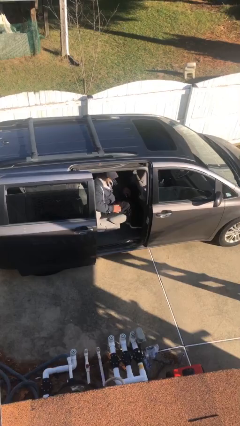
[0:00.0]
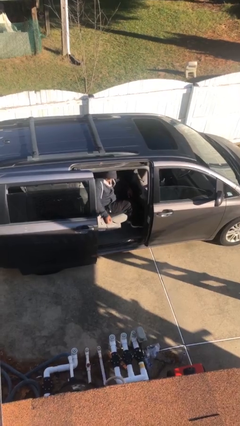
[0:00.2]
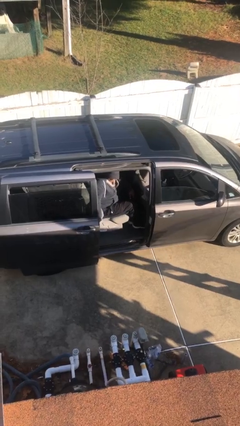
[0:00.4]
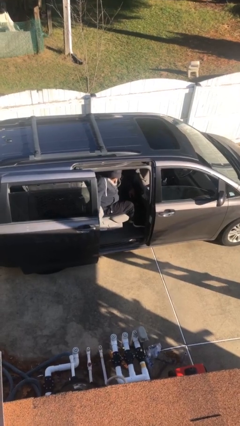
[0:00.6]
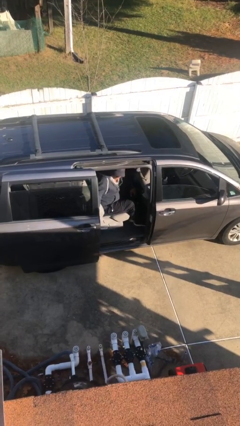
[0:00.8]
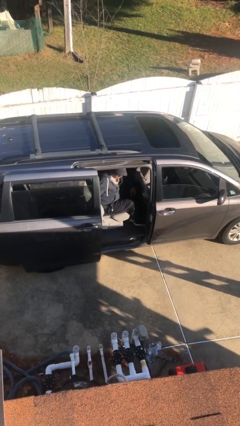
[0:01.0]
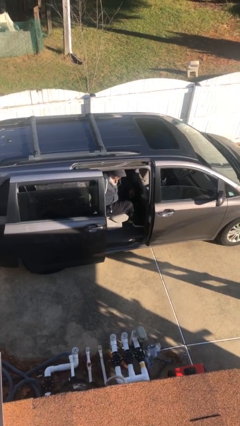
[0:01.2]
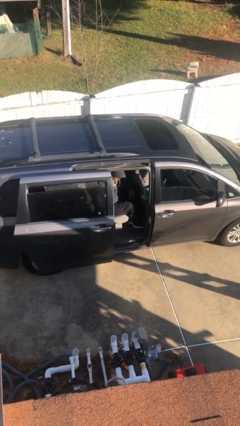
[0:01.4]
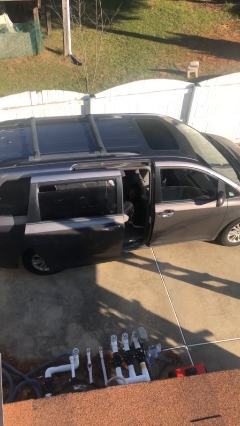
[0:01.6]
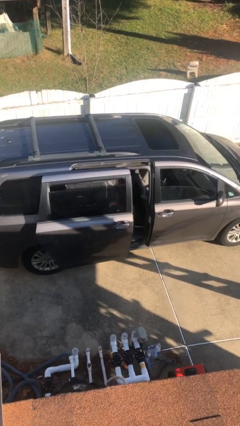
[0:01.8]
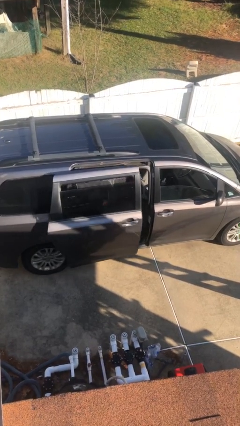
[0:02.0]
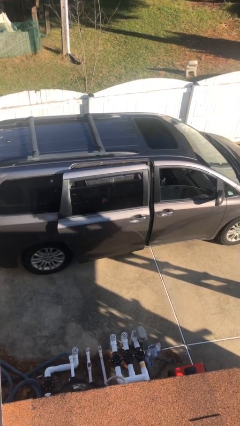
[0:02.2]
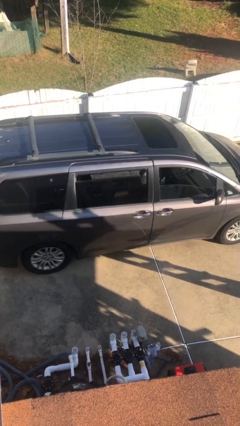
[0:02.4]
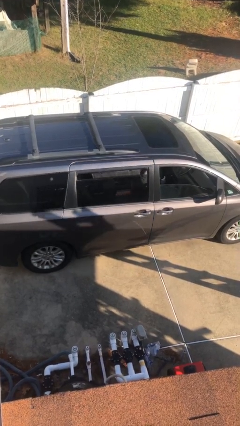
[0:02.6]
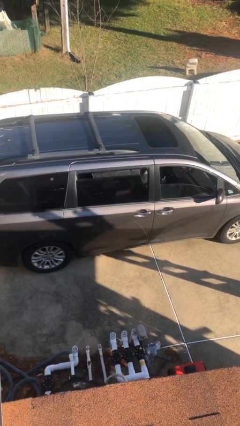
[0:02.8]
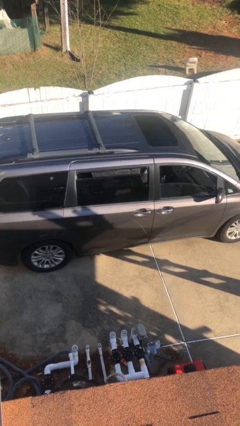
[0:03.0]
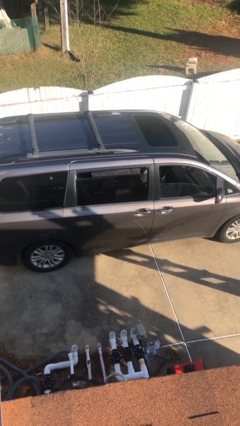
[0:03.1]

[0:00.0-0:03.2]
person closes car door

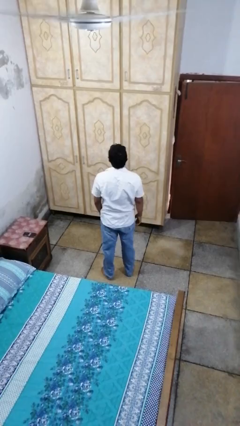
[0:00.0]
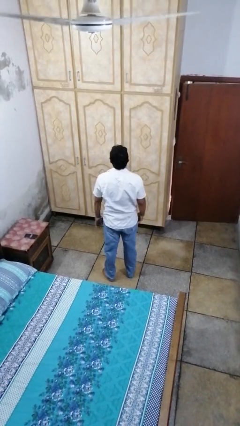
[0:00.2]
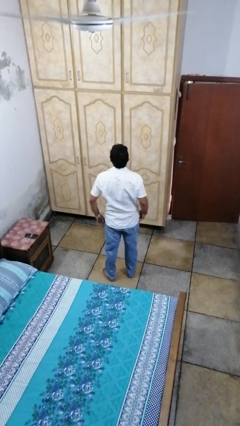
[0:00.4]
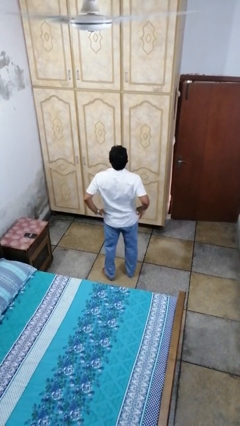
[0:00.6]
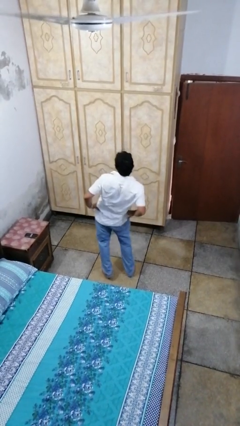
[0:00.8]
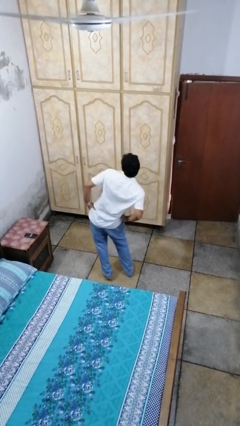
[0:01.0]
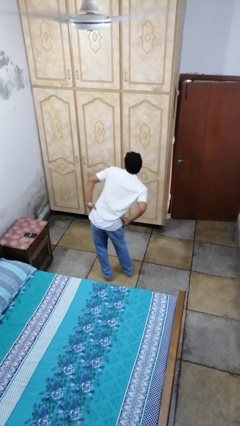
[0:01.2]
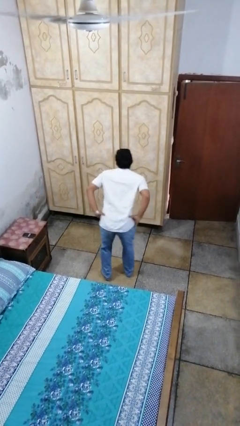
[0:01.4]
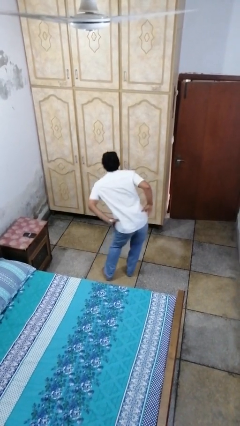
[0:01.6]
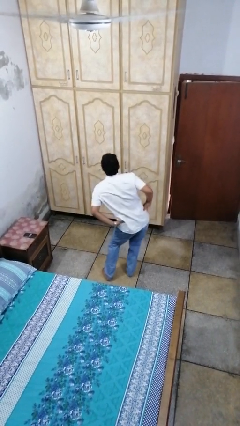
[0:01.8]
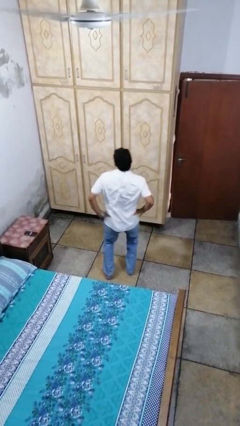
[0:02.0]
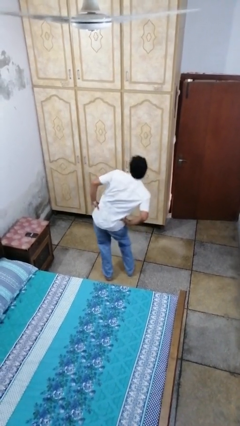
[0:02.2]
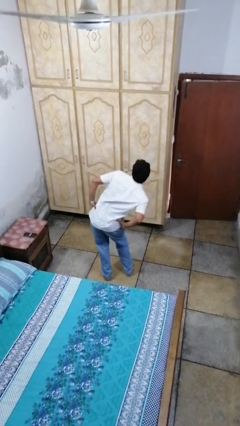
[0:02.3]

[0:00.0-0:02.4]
person wiggles hips

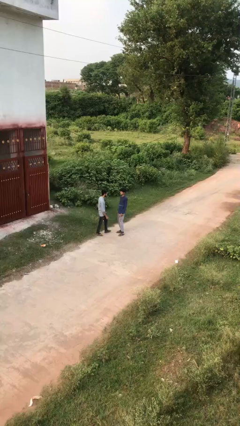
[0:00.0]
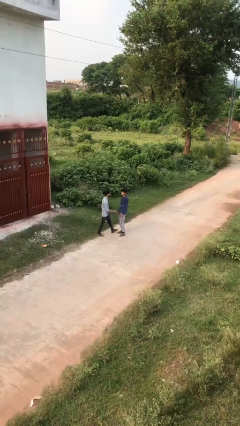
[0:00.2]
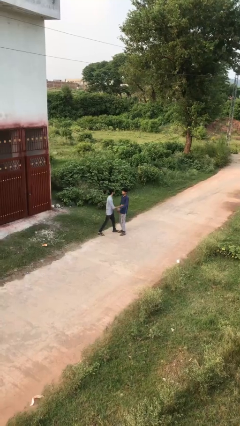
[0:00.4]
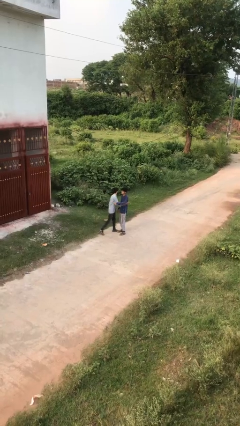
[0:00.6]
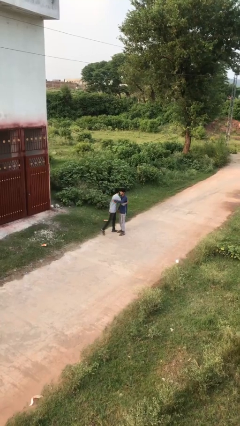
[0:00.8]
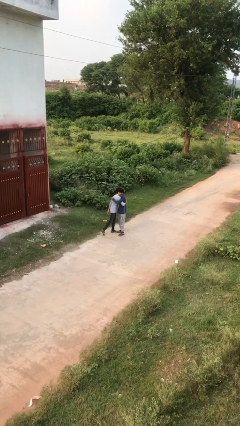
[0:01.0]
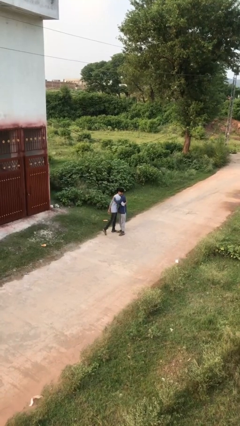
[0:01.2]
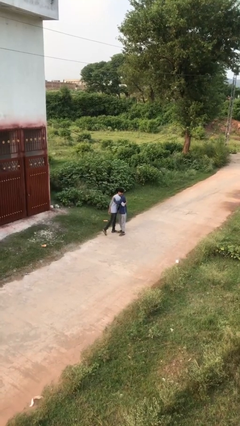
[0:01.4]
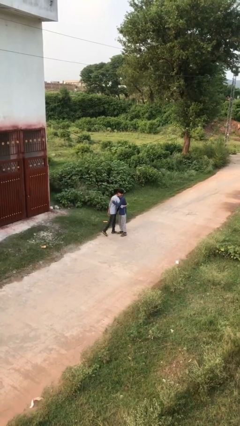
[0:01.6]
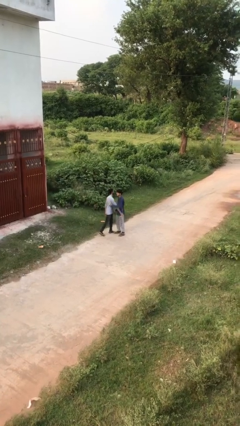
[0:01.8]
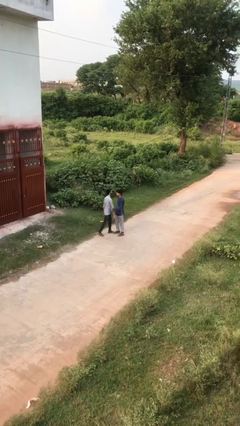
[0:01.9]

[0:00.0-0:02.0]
person embraces person

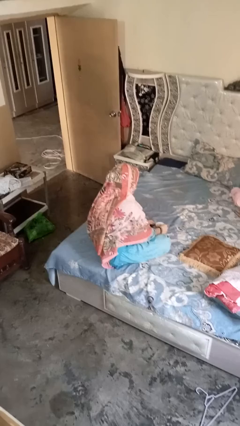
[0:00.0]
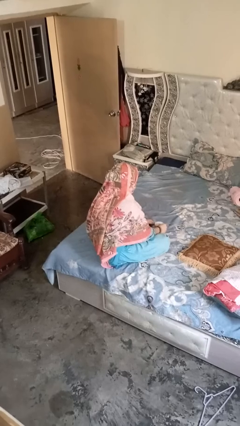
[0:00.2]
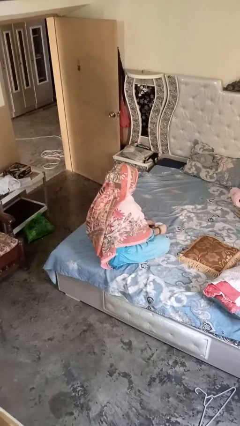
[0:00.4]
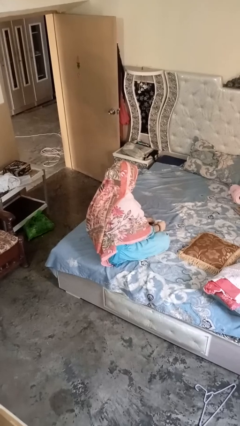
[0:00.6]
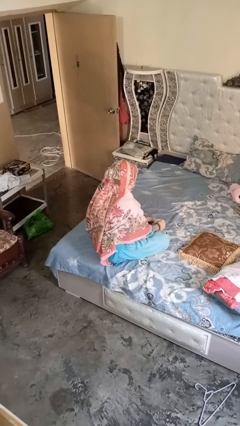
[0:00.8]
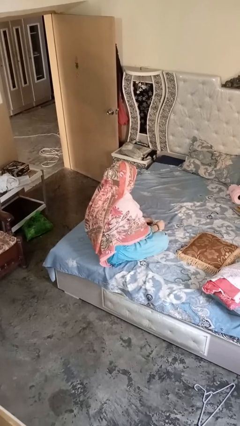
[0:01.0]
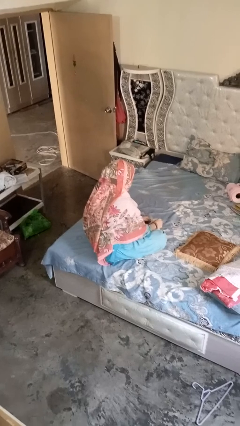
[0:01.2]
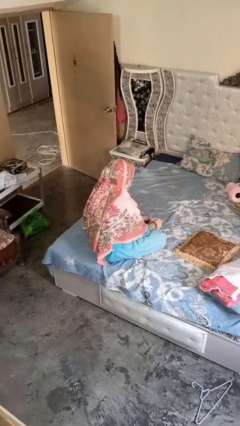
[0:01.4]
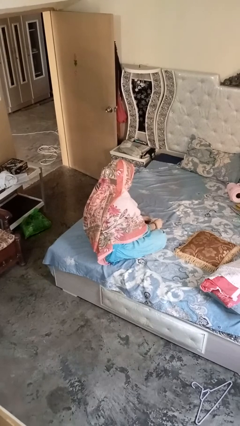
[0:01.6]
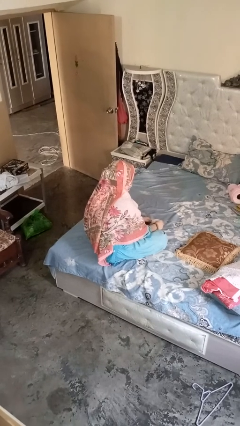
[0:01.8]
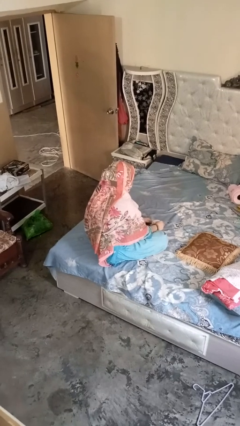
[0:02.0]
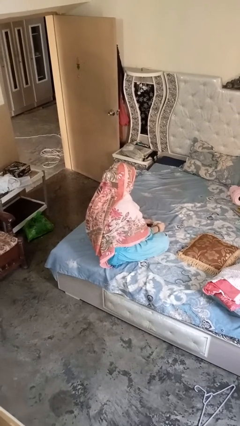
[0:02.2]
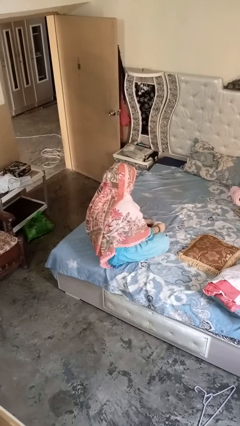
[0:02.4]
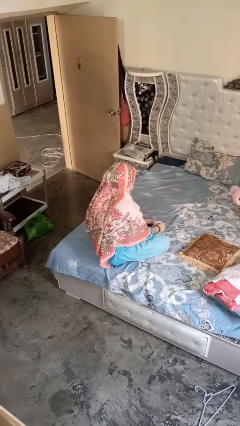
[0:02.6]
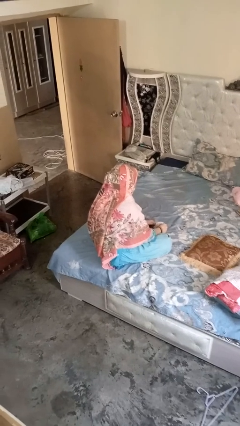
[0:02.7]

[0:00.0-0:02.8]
person stirs mug

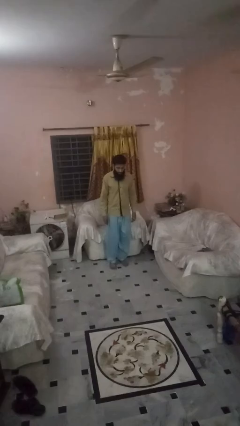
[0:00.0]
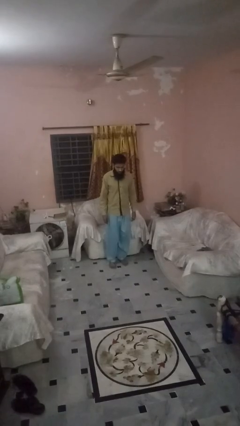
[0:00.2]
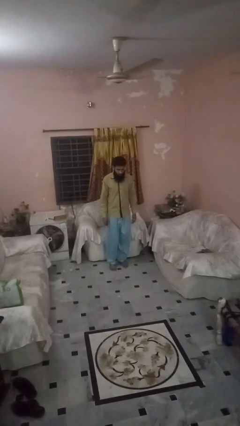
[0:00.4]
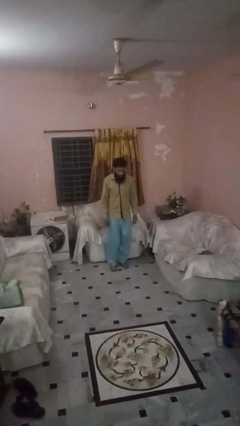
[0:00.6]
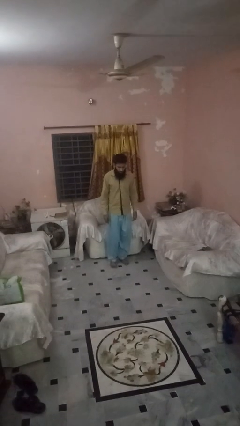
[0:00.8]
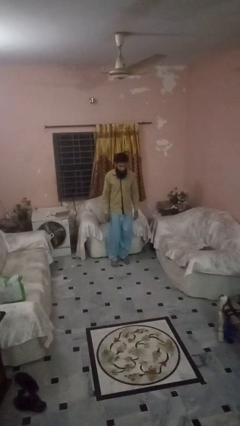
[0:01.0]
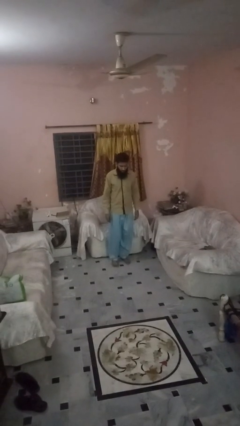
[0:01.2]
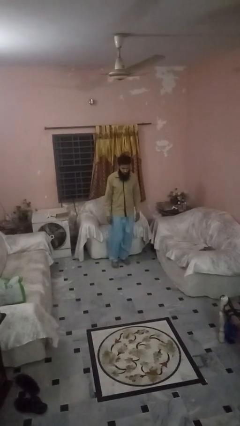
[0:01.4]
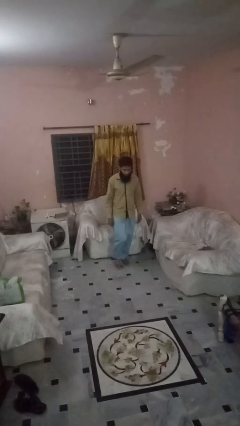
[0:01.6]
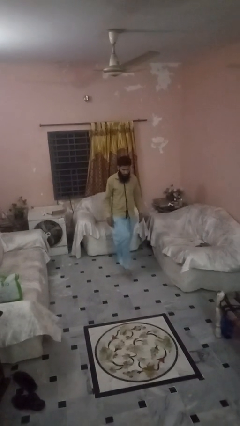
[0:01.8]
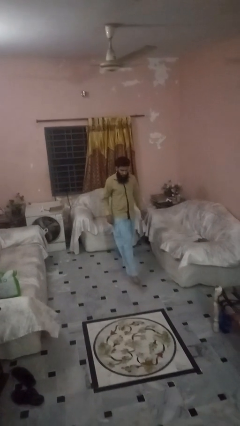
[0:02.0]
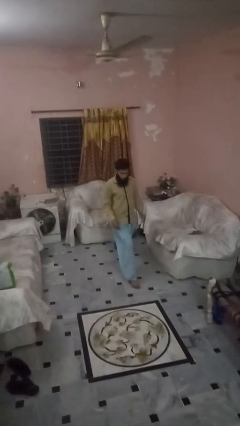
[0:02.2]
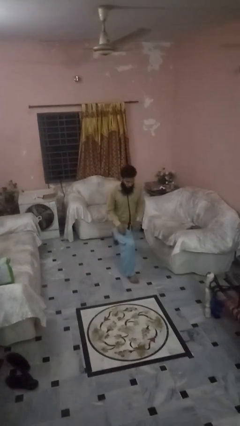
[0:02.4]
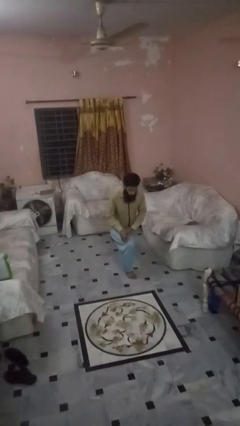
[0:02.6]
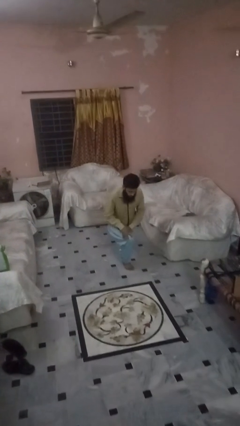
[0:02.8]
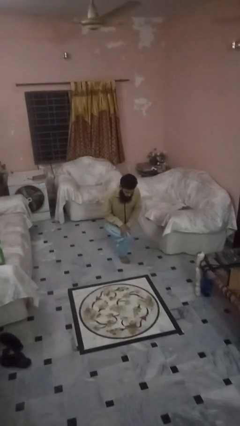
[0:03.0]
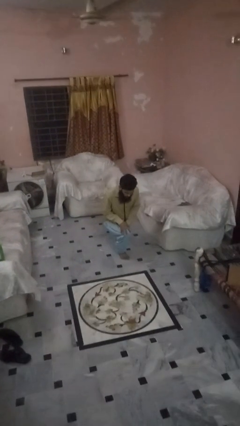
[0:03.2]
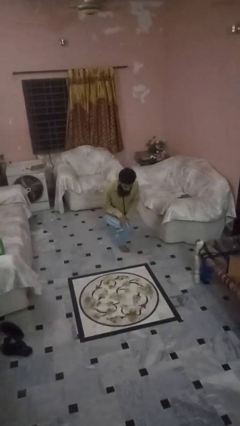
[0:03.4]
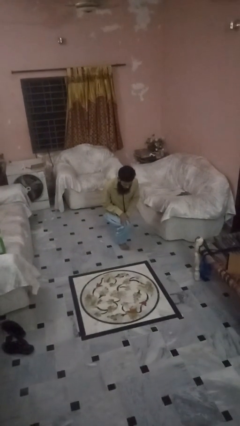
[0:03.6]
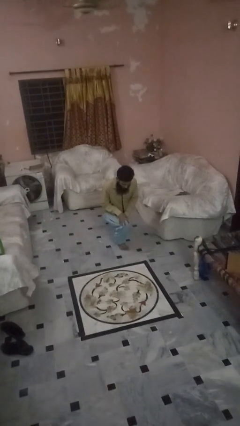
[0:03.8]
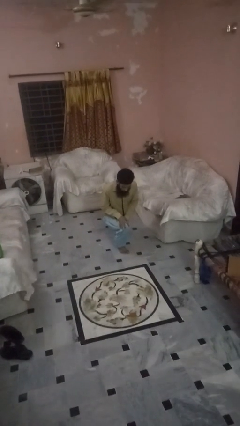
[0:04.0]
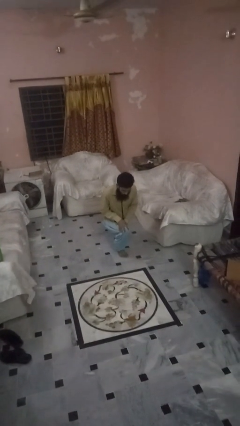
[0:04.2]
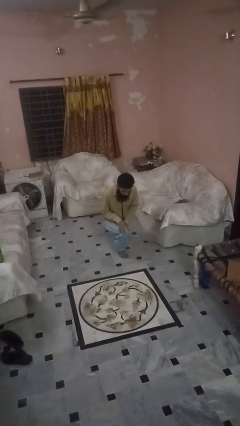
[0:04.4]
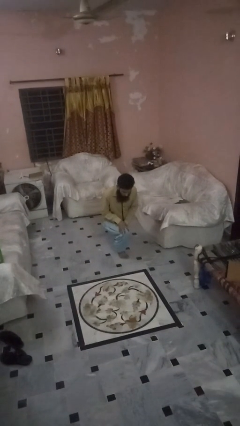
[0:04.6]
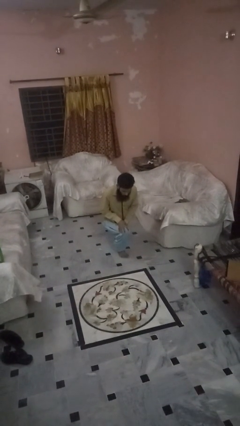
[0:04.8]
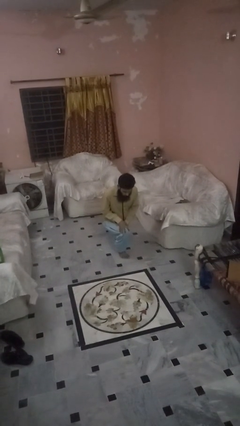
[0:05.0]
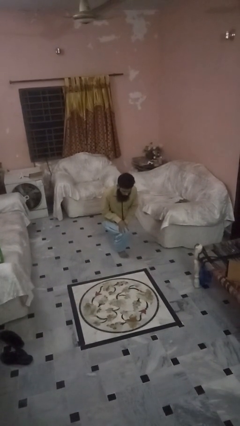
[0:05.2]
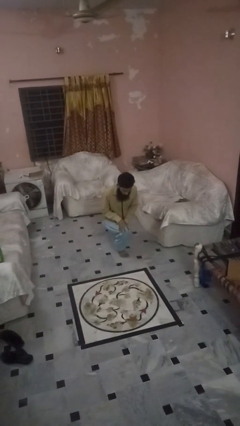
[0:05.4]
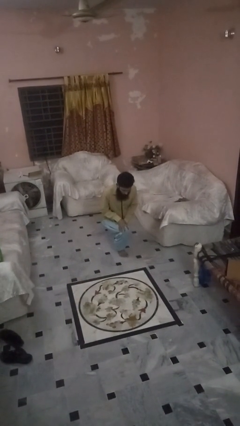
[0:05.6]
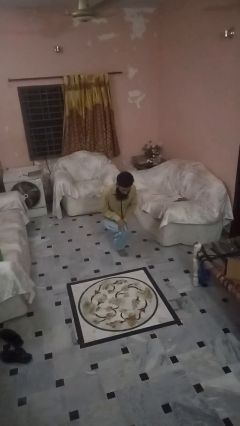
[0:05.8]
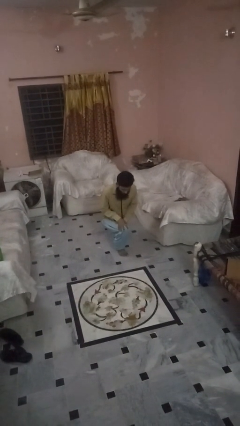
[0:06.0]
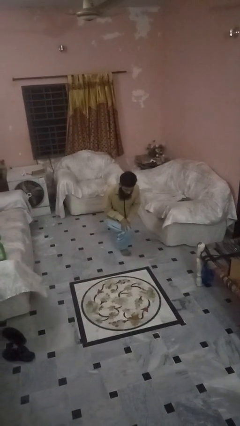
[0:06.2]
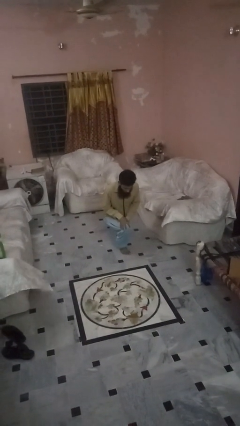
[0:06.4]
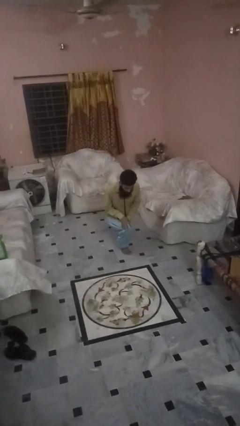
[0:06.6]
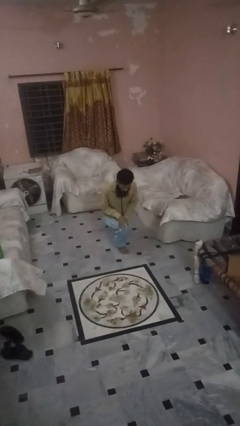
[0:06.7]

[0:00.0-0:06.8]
person exercises with lunges

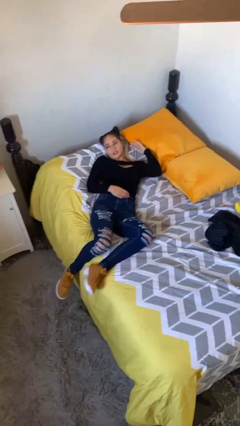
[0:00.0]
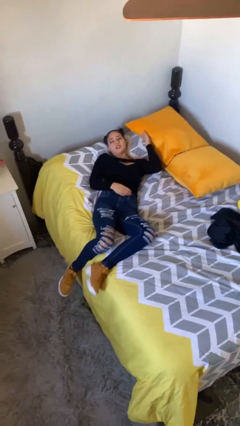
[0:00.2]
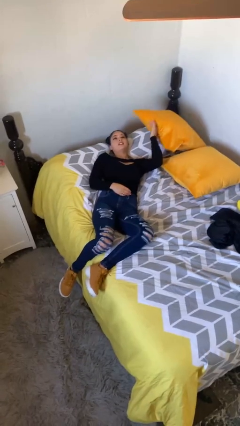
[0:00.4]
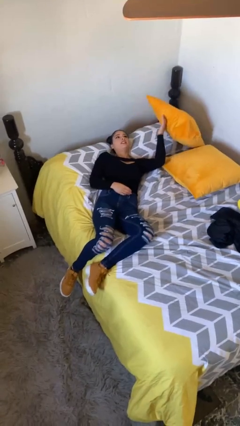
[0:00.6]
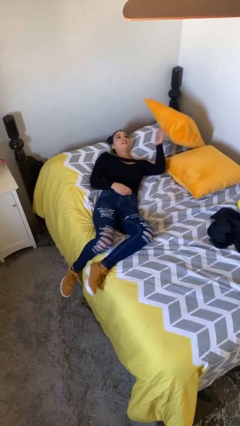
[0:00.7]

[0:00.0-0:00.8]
person lies down on bed
